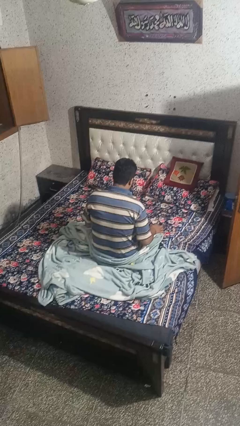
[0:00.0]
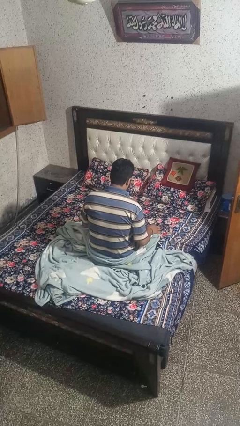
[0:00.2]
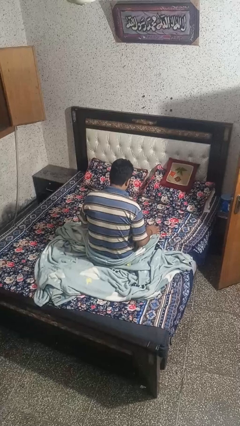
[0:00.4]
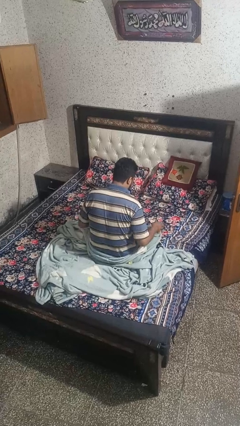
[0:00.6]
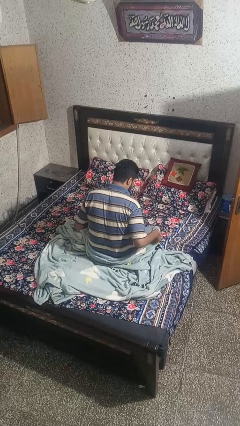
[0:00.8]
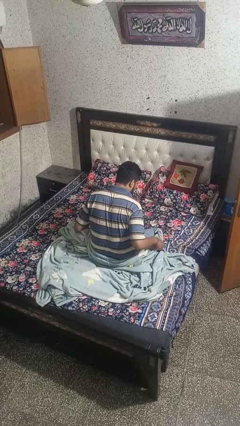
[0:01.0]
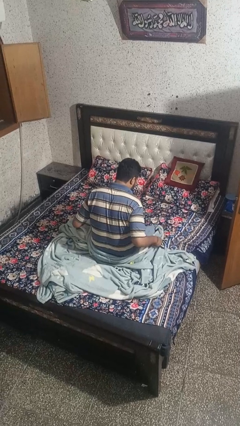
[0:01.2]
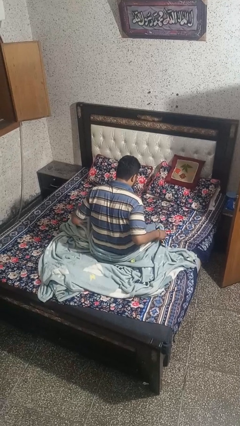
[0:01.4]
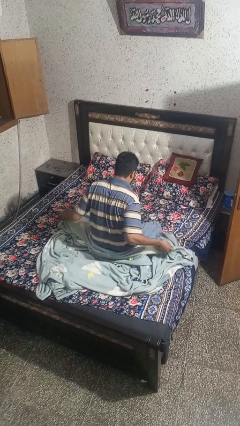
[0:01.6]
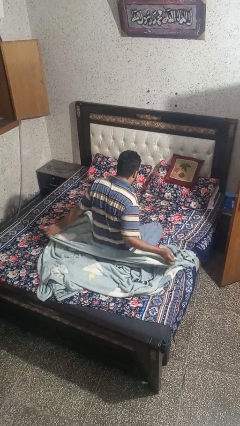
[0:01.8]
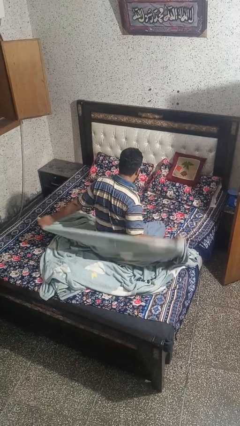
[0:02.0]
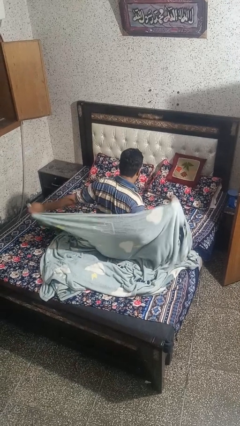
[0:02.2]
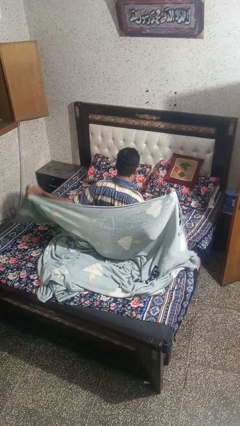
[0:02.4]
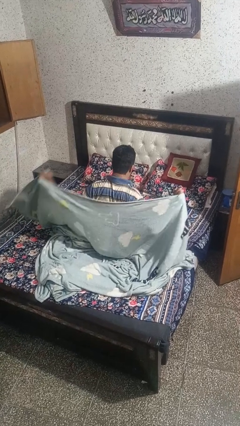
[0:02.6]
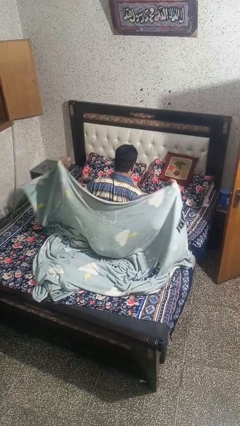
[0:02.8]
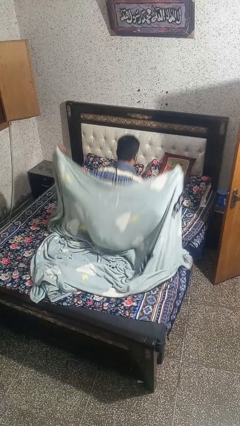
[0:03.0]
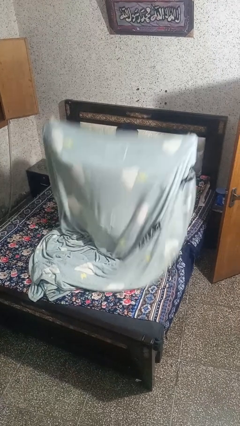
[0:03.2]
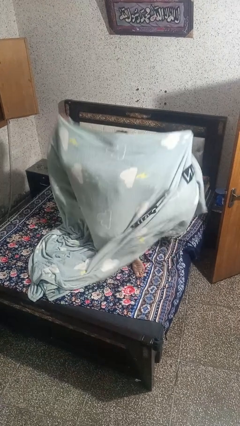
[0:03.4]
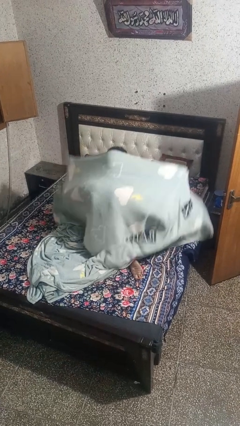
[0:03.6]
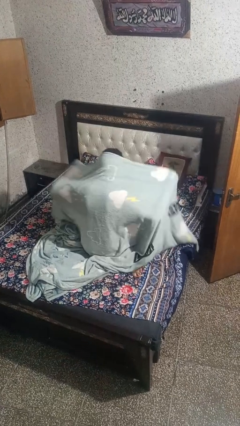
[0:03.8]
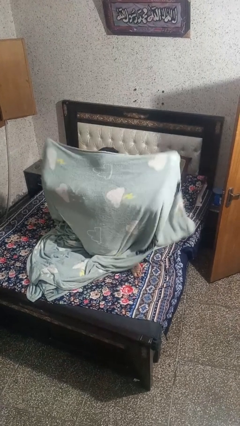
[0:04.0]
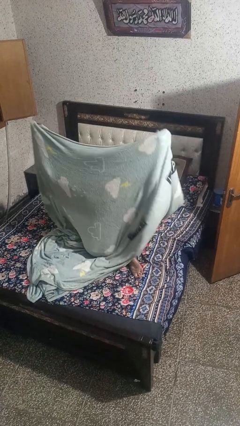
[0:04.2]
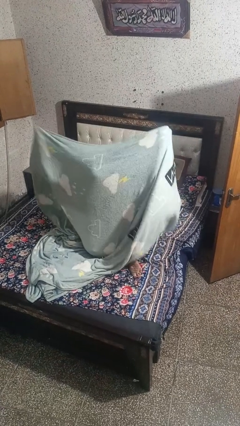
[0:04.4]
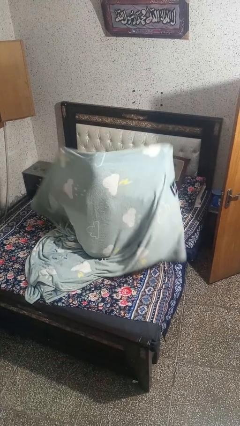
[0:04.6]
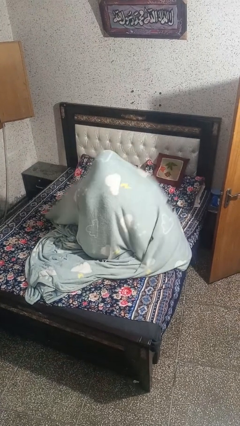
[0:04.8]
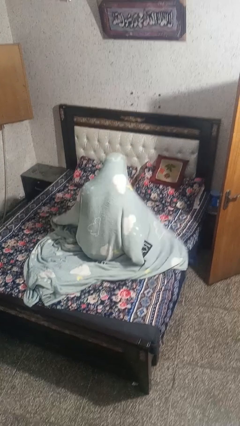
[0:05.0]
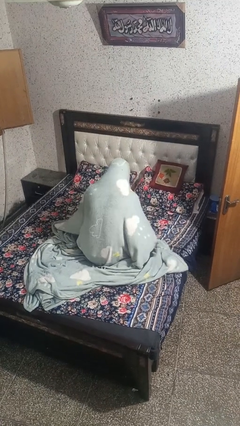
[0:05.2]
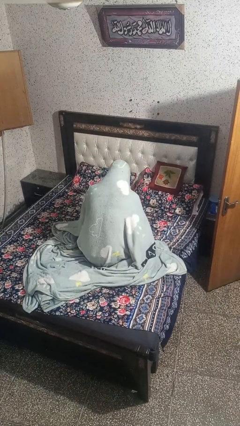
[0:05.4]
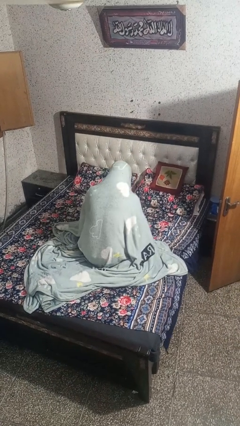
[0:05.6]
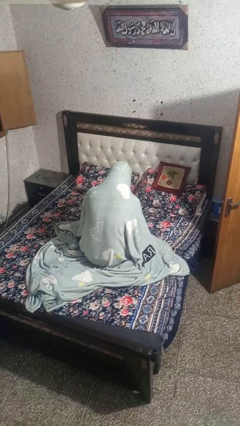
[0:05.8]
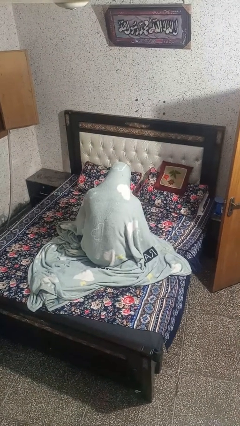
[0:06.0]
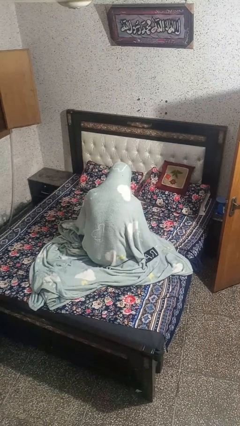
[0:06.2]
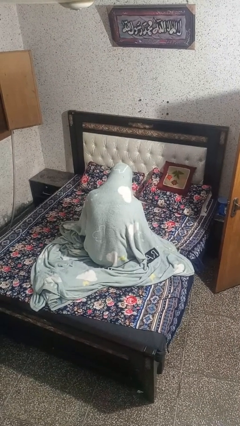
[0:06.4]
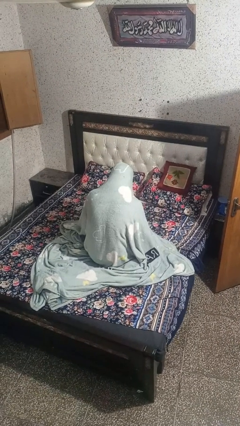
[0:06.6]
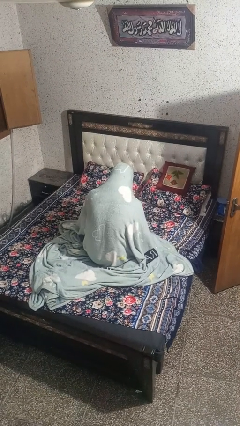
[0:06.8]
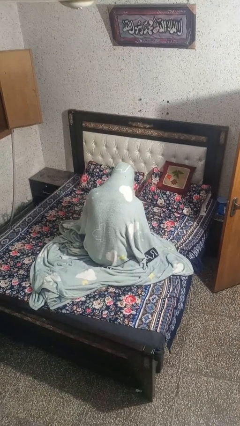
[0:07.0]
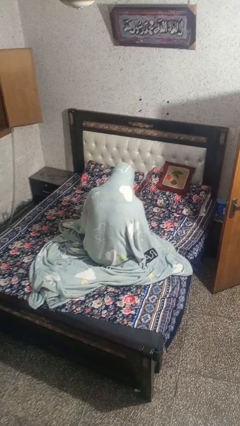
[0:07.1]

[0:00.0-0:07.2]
person covers with blanket

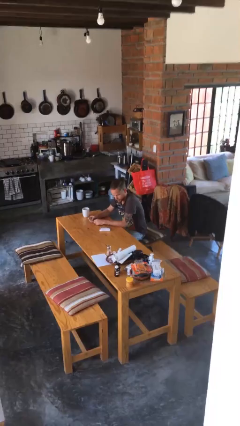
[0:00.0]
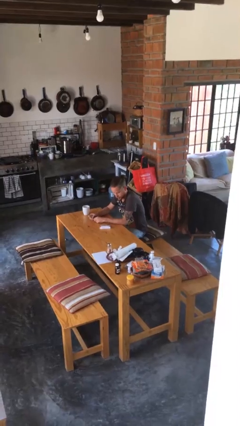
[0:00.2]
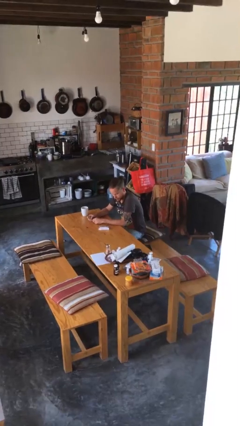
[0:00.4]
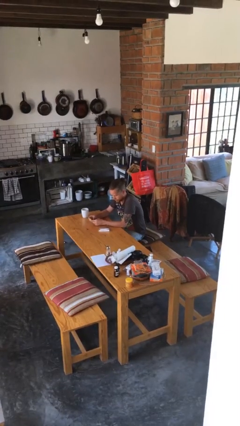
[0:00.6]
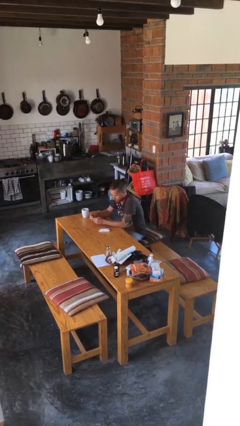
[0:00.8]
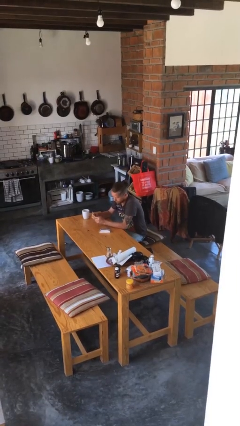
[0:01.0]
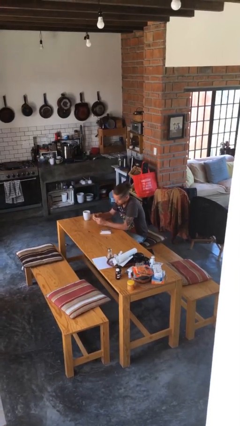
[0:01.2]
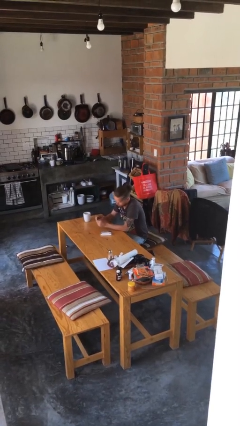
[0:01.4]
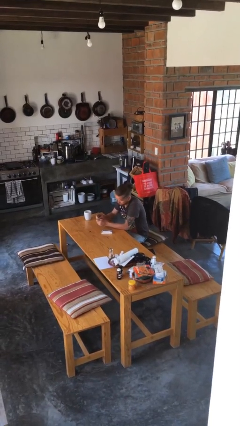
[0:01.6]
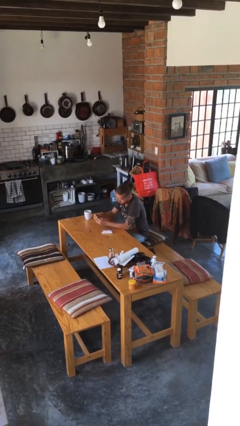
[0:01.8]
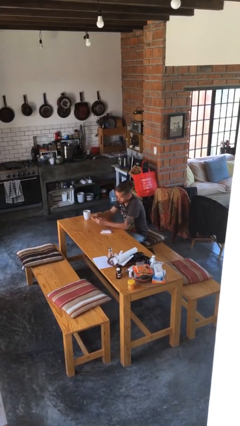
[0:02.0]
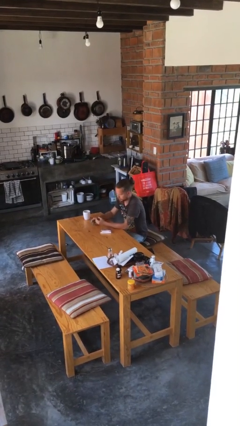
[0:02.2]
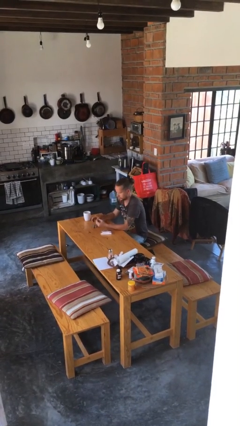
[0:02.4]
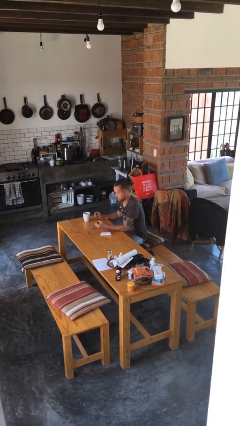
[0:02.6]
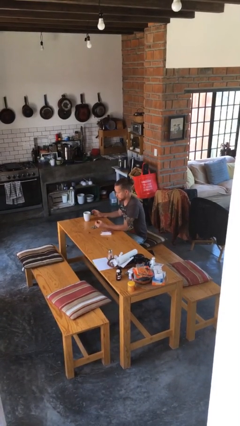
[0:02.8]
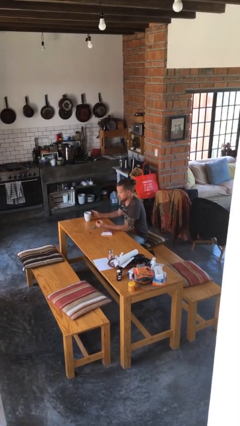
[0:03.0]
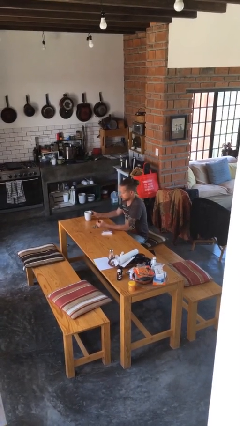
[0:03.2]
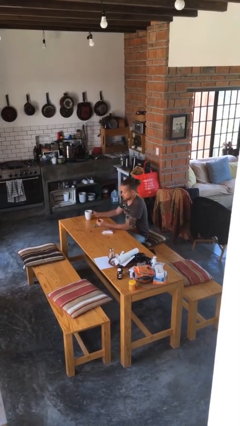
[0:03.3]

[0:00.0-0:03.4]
person takes medicine pills

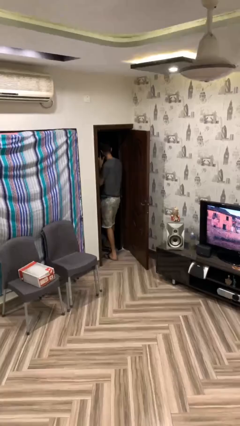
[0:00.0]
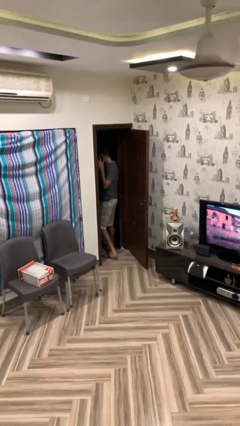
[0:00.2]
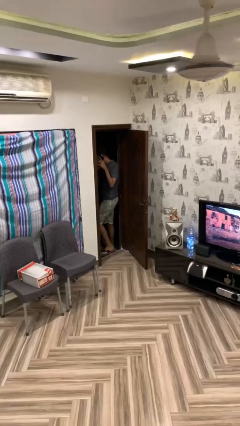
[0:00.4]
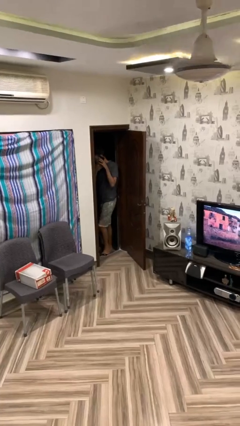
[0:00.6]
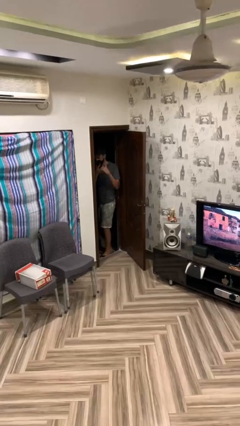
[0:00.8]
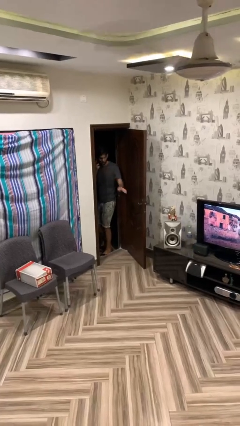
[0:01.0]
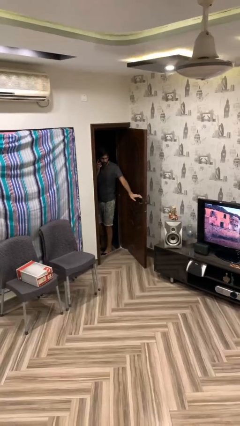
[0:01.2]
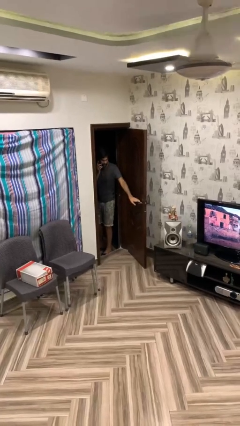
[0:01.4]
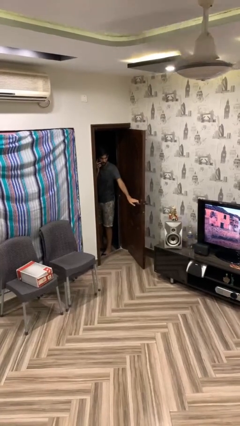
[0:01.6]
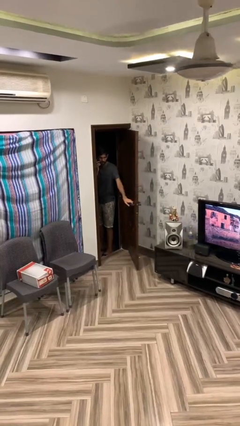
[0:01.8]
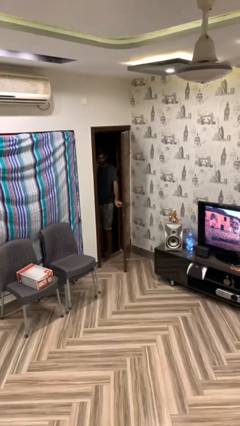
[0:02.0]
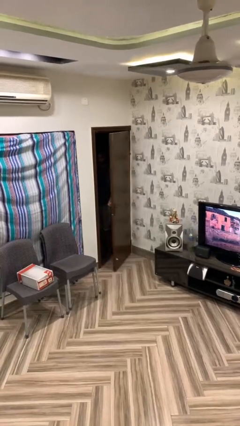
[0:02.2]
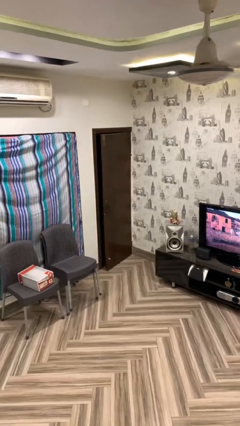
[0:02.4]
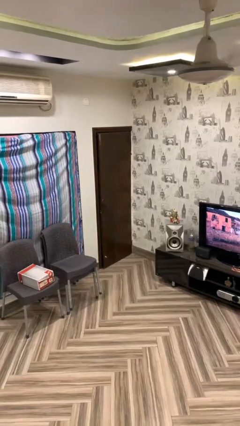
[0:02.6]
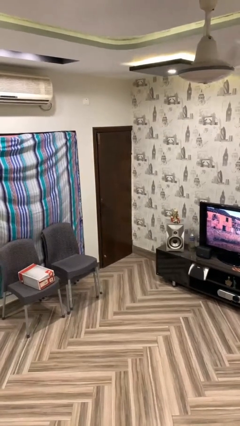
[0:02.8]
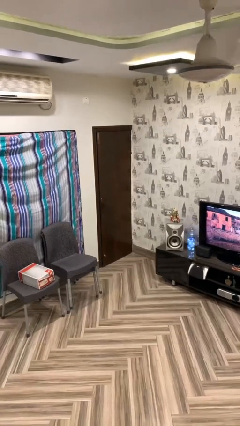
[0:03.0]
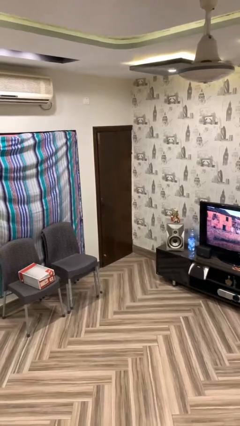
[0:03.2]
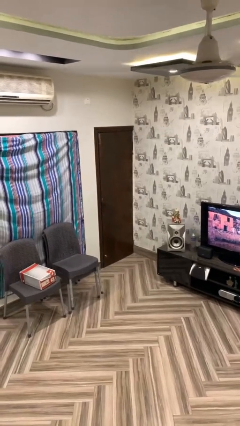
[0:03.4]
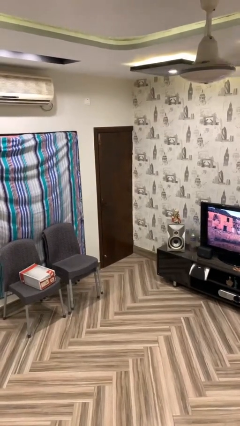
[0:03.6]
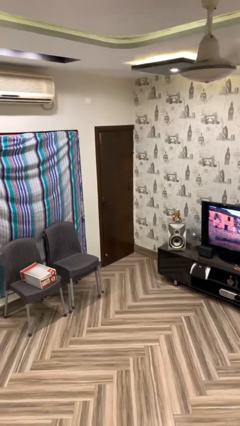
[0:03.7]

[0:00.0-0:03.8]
person closes facility door

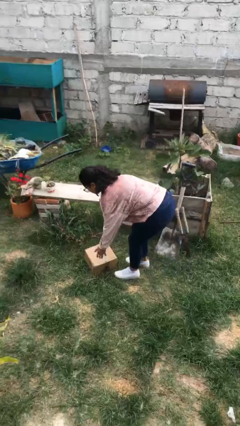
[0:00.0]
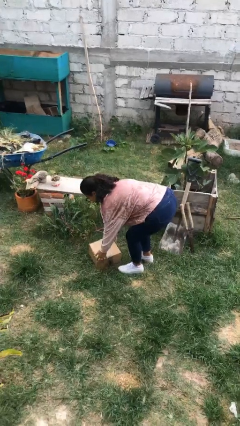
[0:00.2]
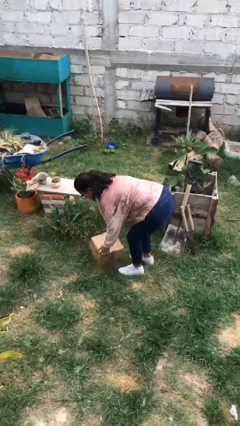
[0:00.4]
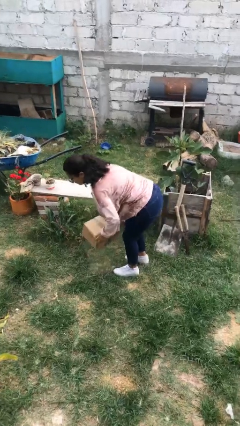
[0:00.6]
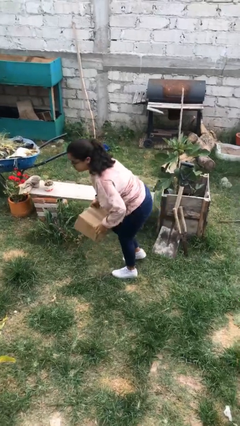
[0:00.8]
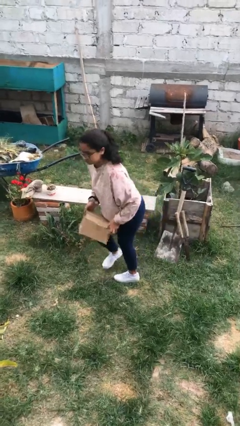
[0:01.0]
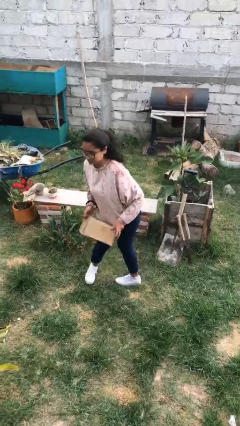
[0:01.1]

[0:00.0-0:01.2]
person picks up object from floor

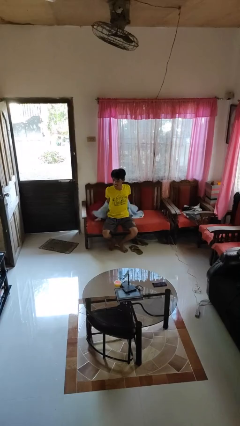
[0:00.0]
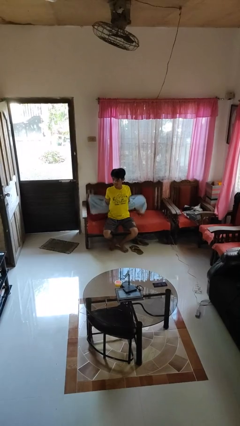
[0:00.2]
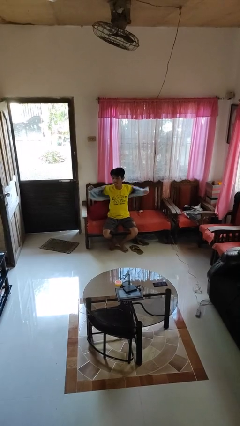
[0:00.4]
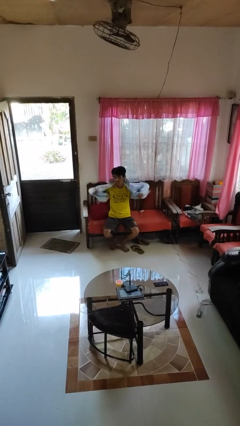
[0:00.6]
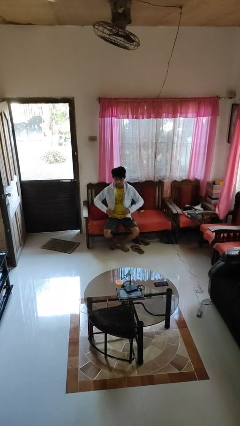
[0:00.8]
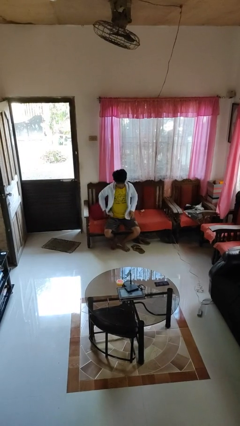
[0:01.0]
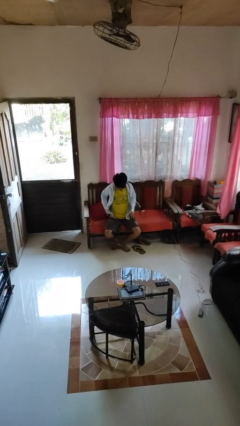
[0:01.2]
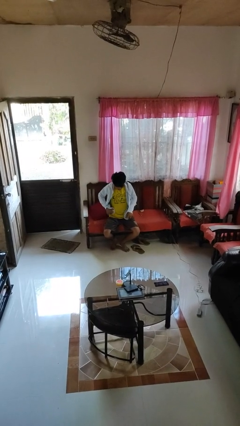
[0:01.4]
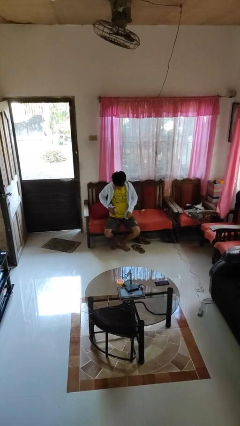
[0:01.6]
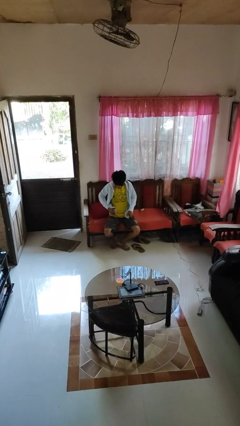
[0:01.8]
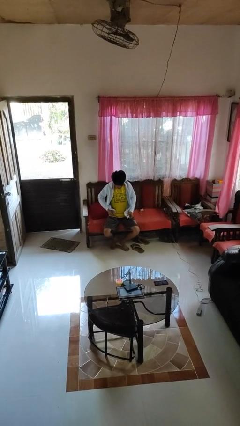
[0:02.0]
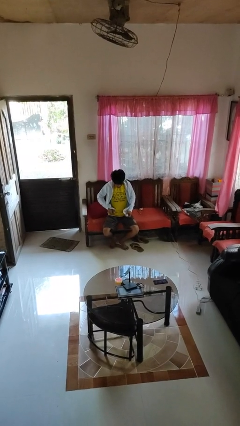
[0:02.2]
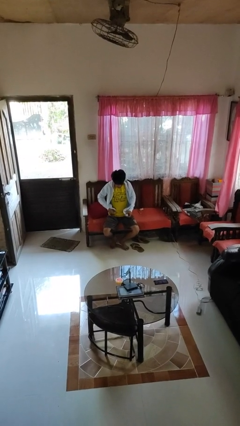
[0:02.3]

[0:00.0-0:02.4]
person puts on jacket
